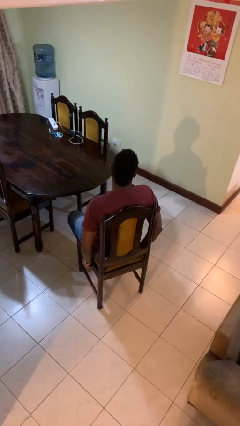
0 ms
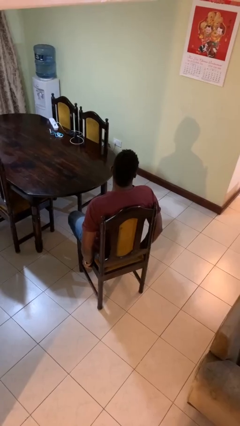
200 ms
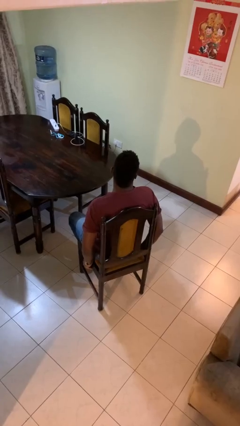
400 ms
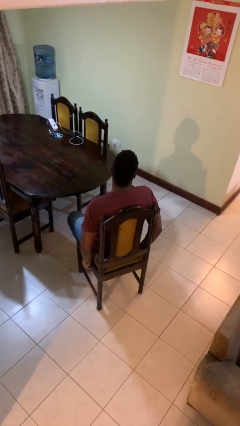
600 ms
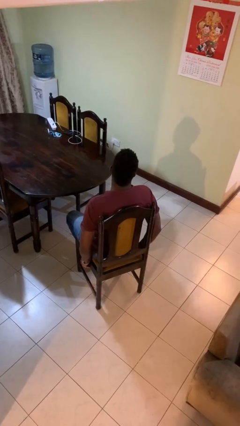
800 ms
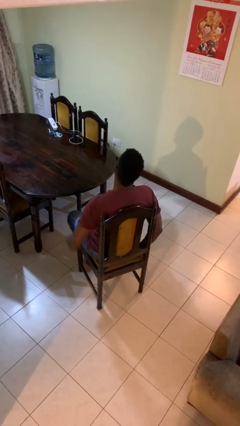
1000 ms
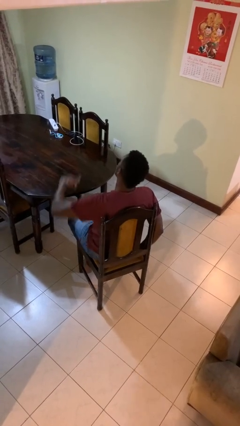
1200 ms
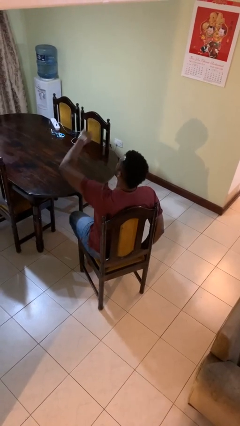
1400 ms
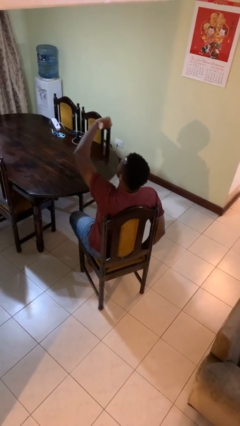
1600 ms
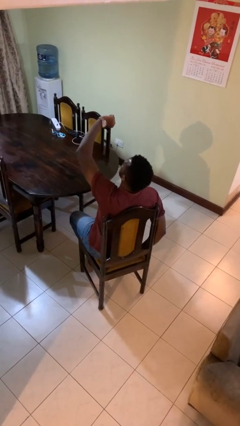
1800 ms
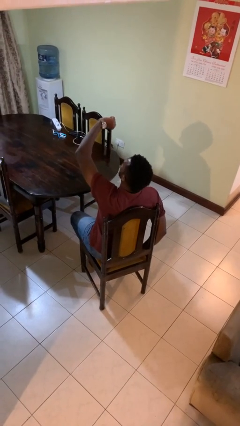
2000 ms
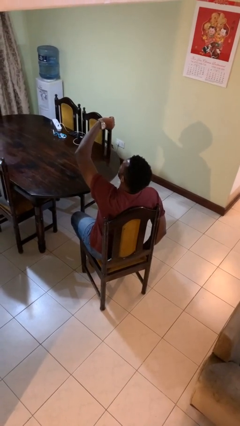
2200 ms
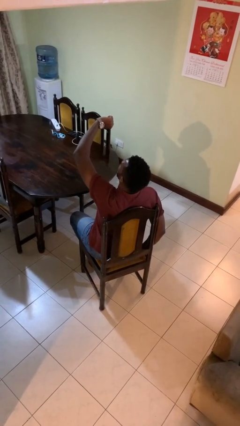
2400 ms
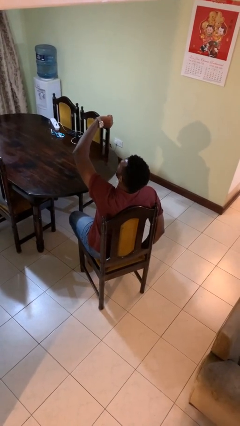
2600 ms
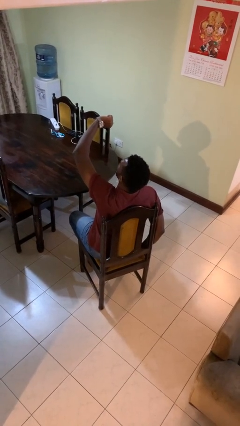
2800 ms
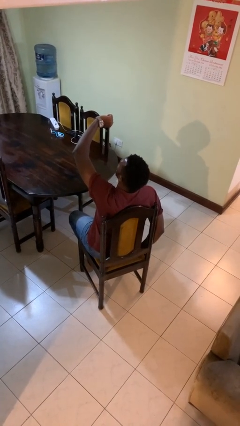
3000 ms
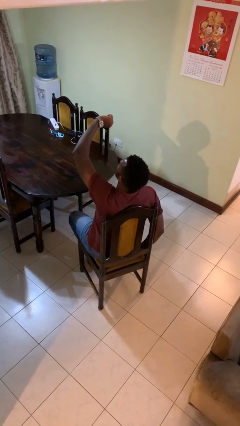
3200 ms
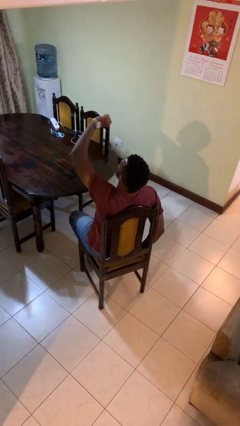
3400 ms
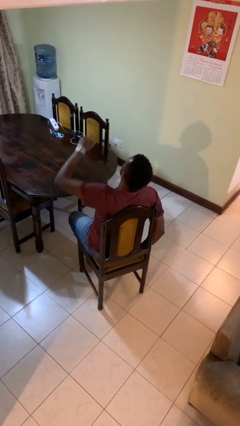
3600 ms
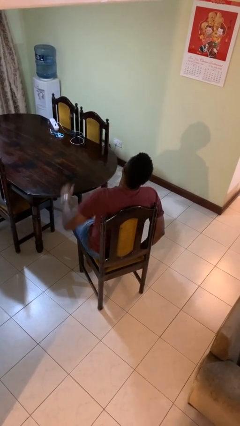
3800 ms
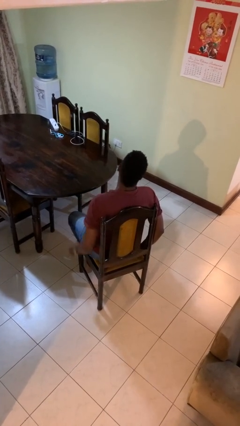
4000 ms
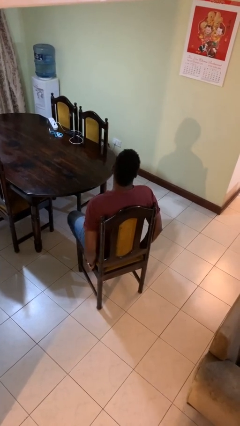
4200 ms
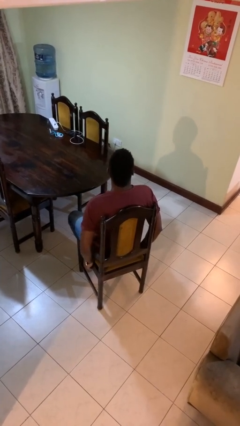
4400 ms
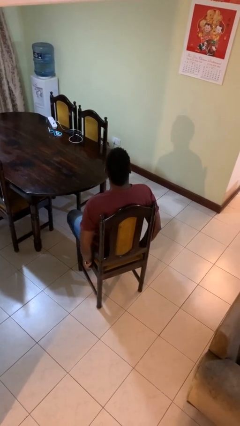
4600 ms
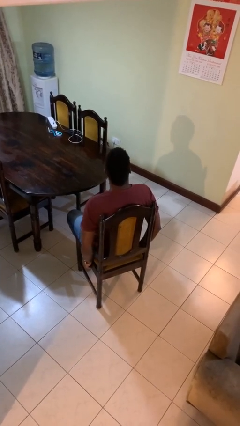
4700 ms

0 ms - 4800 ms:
person looks at wristwatch

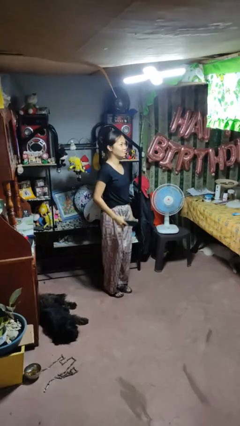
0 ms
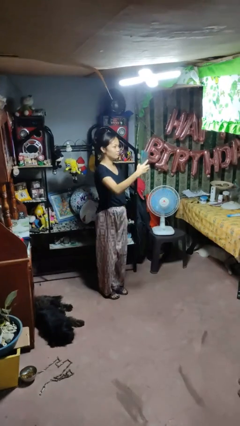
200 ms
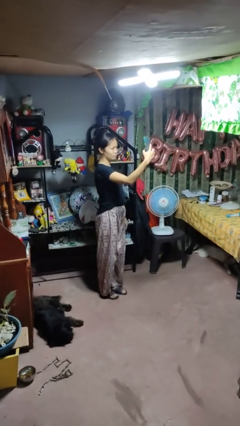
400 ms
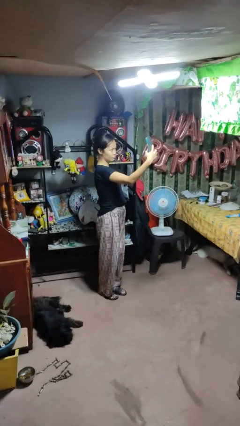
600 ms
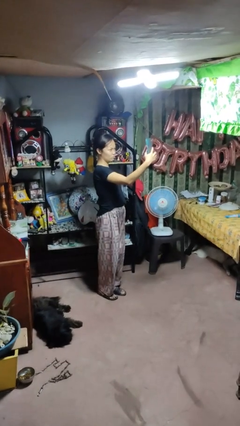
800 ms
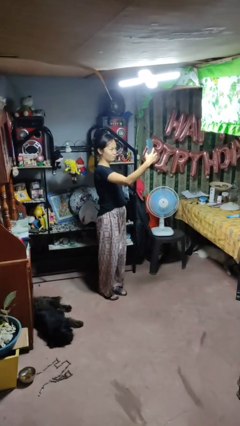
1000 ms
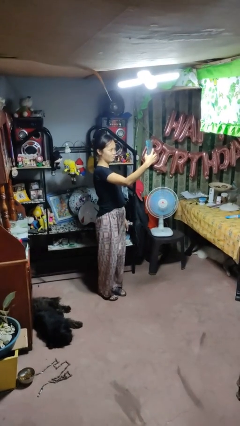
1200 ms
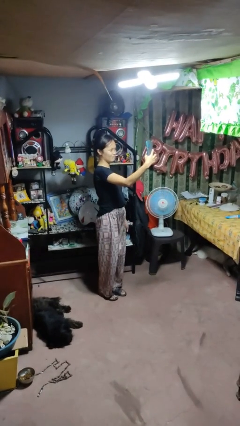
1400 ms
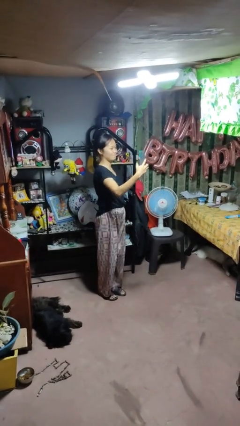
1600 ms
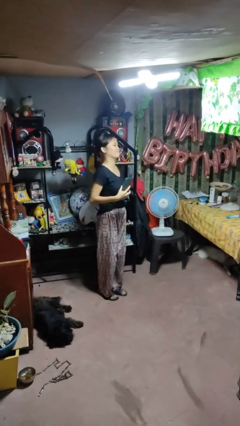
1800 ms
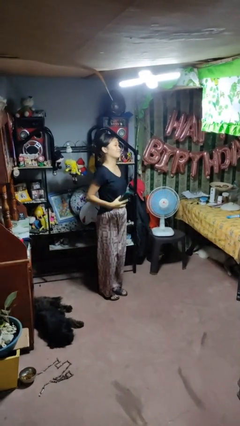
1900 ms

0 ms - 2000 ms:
person takes selfie

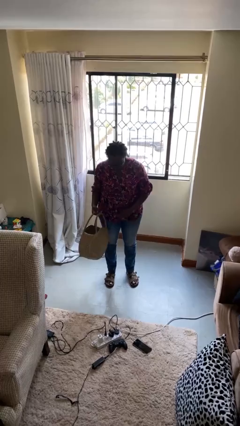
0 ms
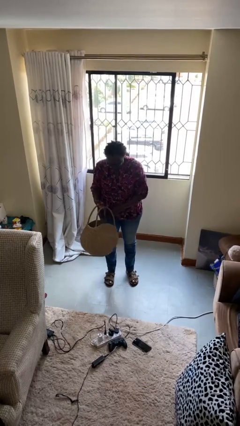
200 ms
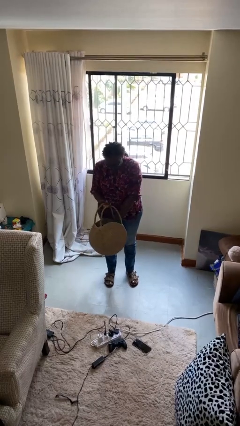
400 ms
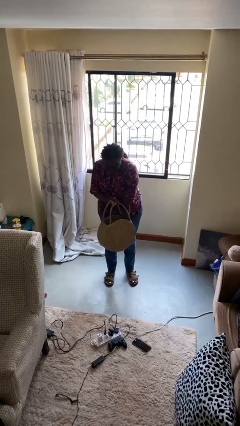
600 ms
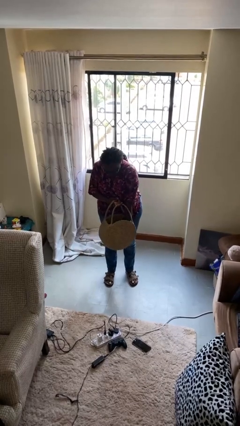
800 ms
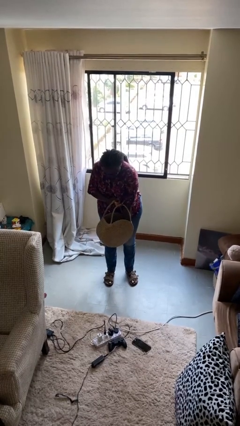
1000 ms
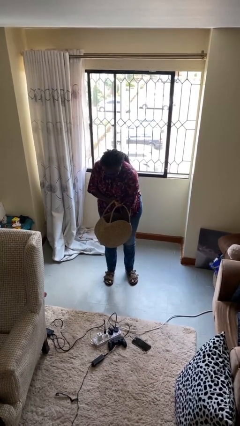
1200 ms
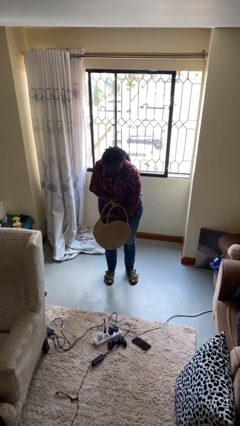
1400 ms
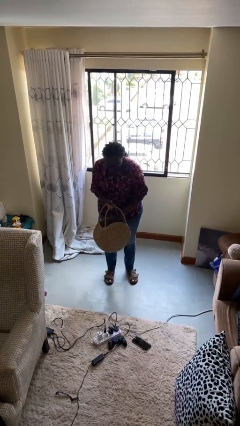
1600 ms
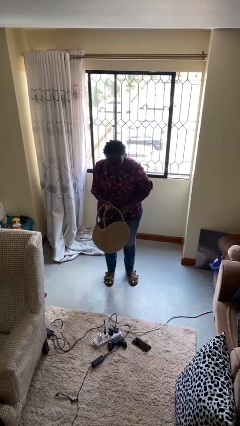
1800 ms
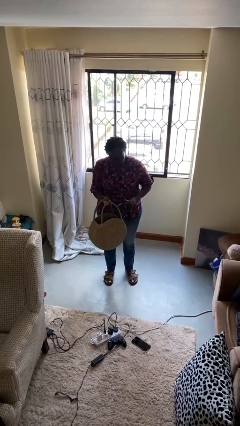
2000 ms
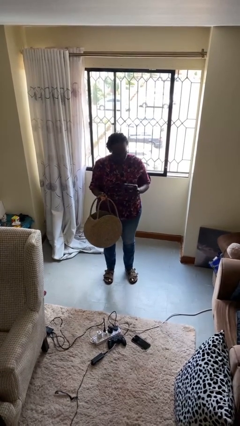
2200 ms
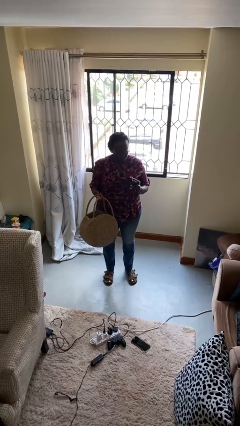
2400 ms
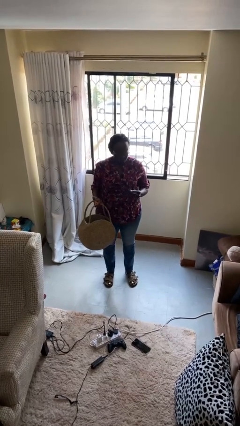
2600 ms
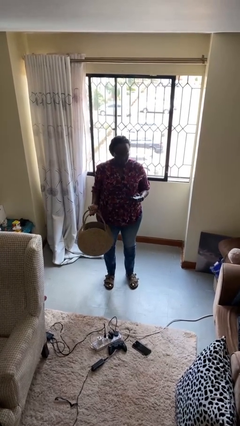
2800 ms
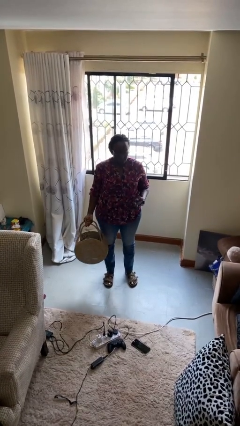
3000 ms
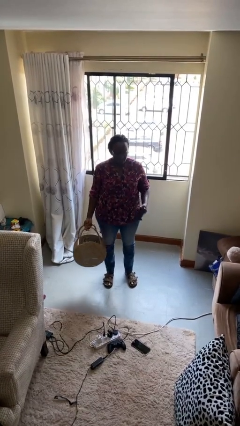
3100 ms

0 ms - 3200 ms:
person takes object from basket

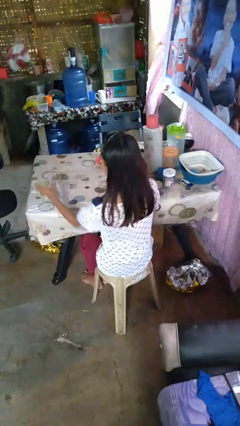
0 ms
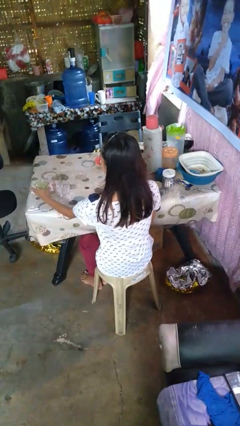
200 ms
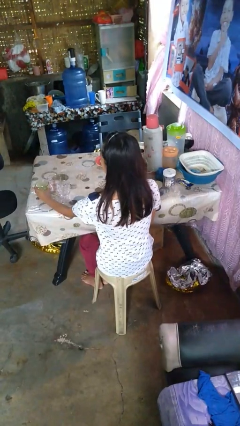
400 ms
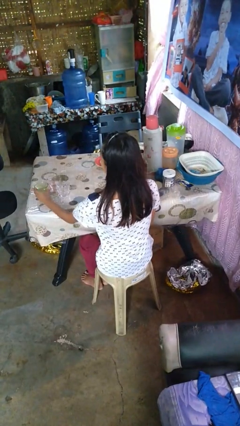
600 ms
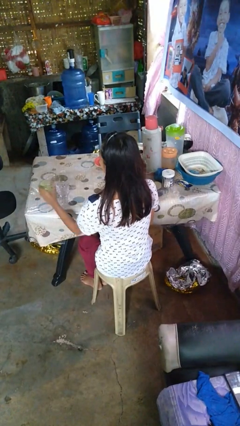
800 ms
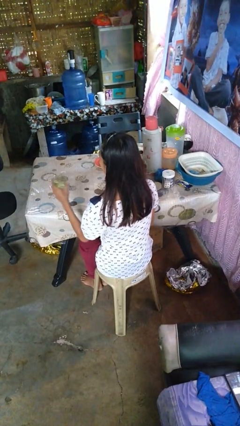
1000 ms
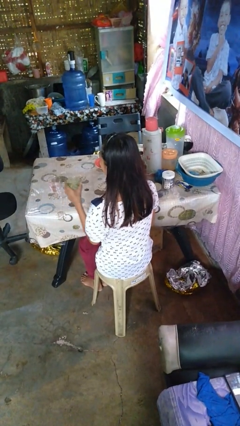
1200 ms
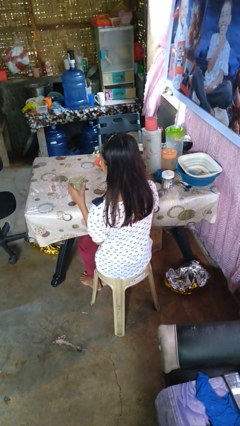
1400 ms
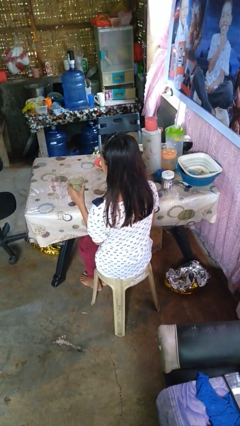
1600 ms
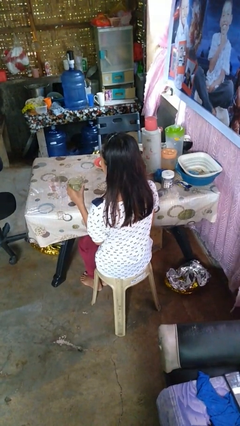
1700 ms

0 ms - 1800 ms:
person picks up object from table

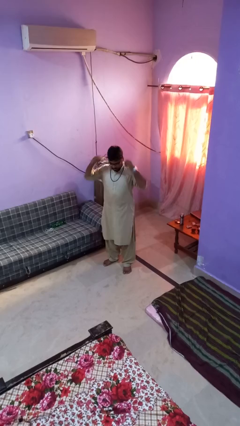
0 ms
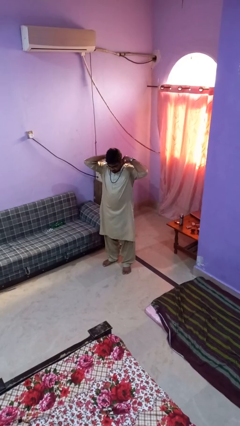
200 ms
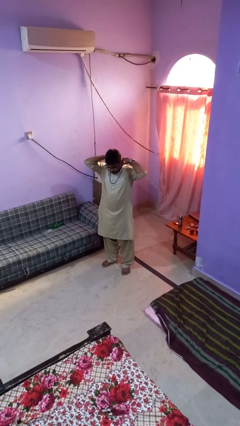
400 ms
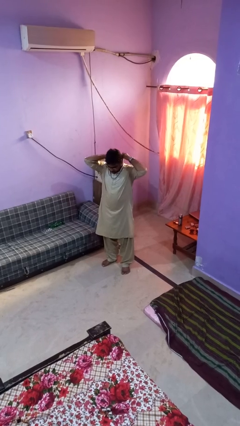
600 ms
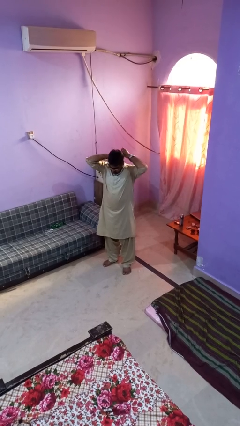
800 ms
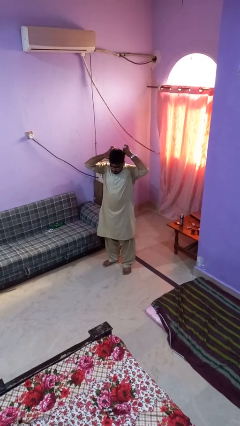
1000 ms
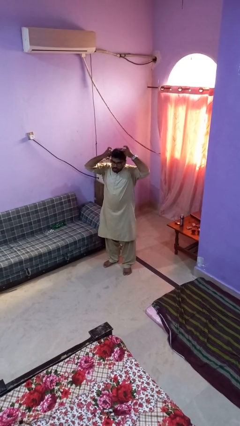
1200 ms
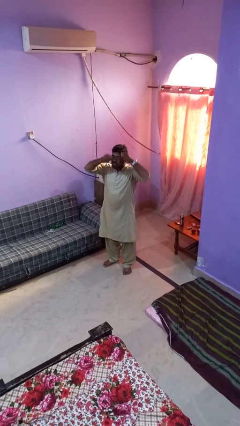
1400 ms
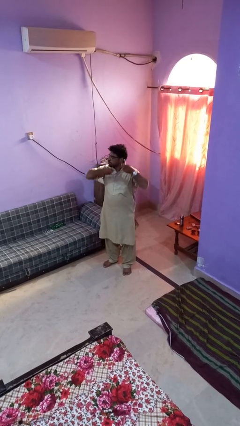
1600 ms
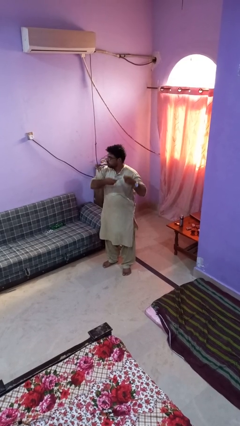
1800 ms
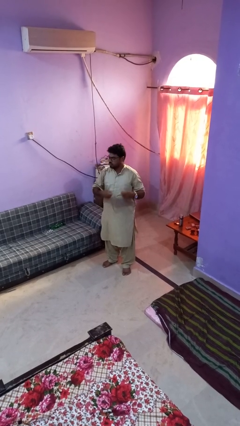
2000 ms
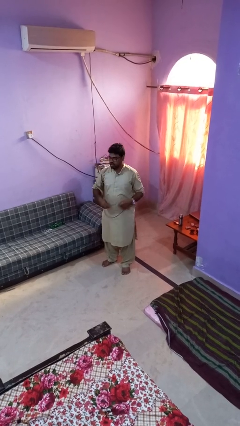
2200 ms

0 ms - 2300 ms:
person takes off necklace

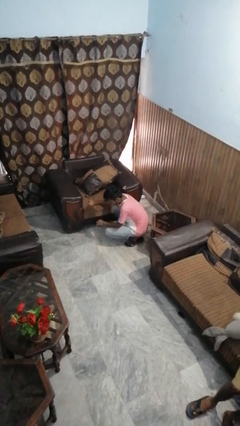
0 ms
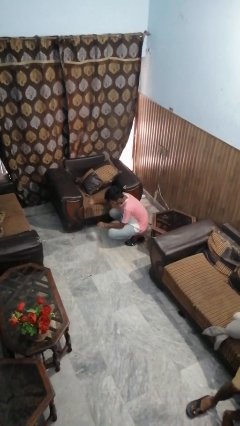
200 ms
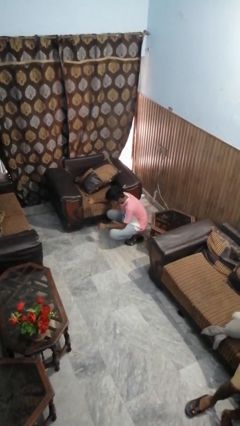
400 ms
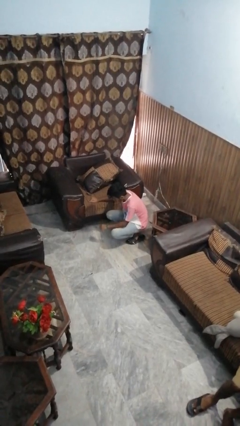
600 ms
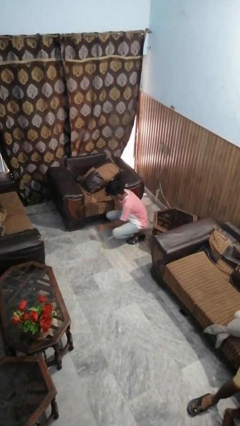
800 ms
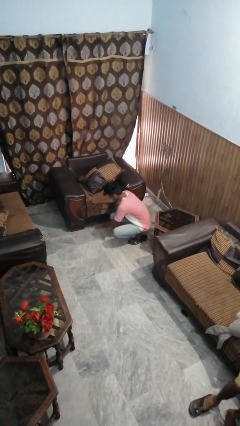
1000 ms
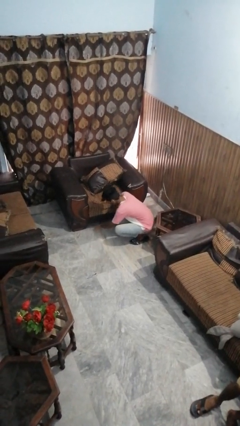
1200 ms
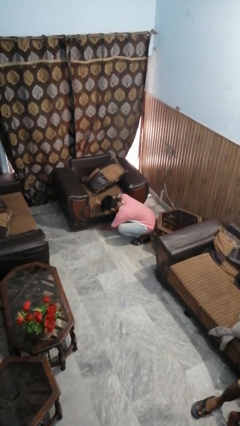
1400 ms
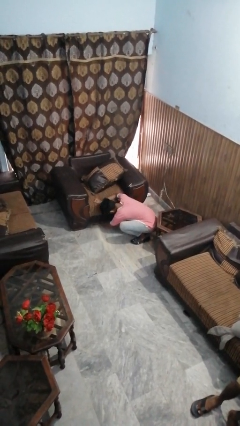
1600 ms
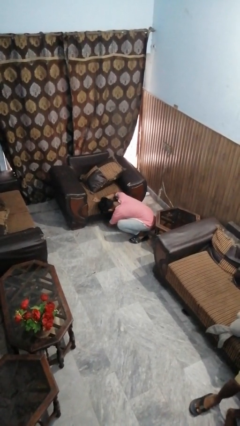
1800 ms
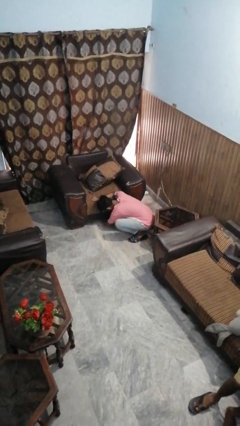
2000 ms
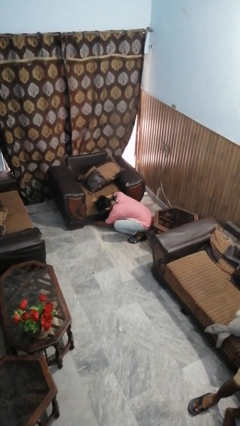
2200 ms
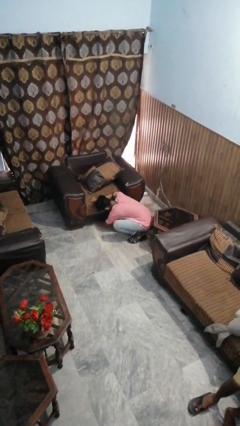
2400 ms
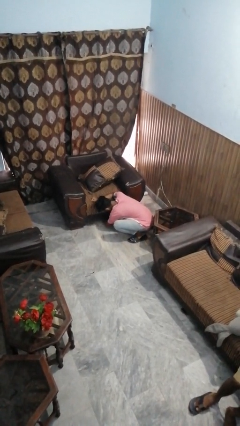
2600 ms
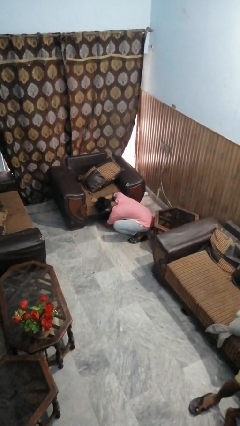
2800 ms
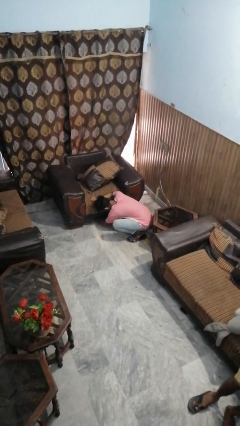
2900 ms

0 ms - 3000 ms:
person searches under couch

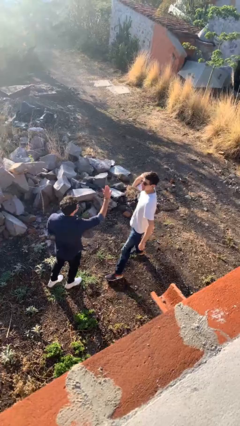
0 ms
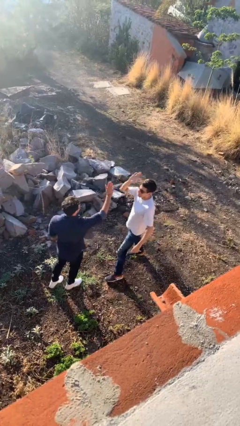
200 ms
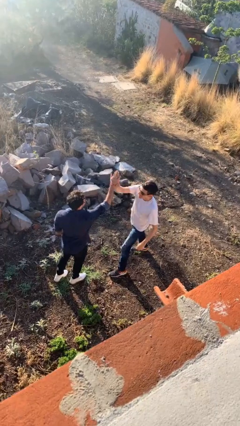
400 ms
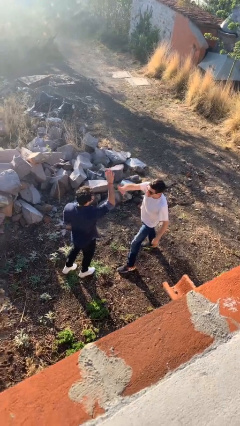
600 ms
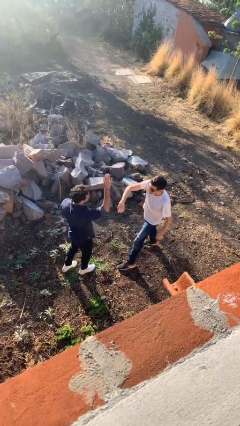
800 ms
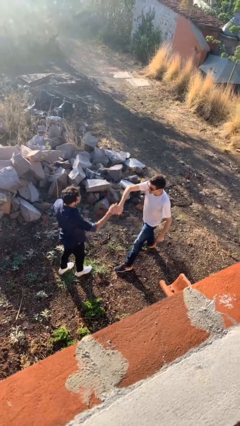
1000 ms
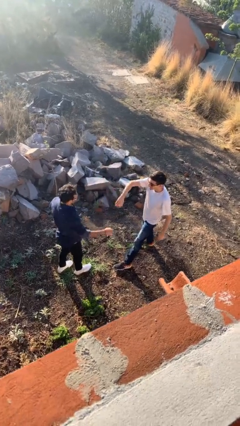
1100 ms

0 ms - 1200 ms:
person highfives hand
